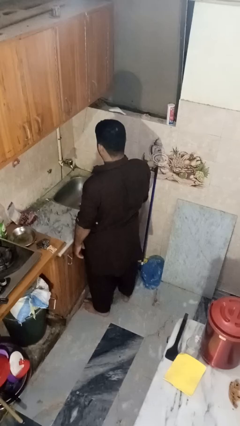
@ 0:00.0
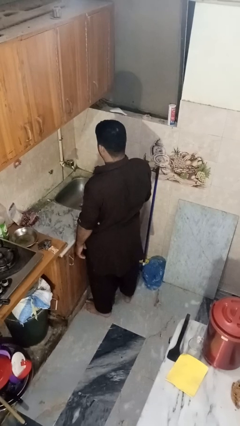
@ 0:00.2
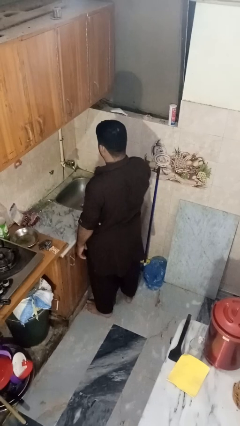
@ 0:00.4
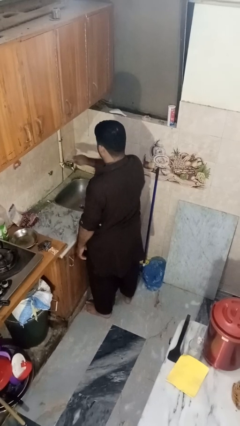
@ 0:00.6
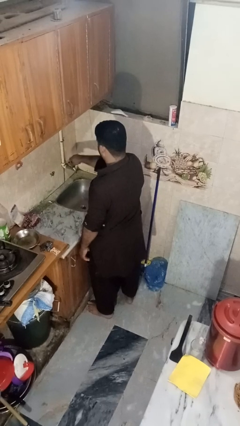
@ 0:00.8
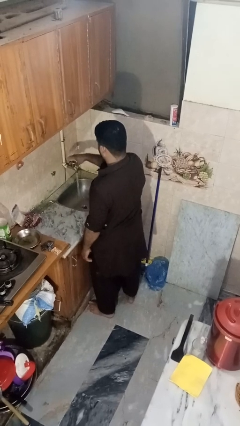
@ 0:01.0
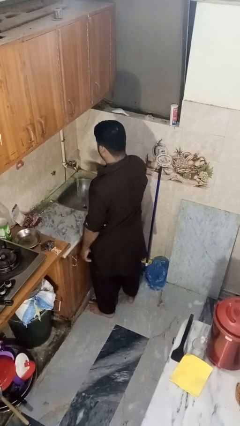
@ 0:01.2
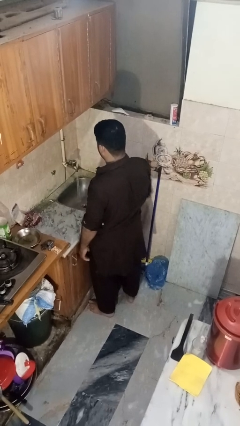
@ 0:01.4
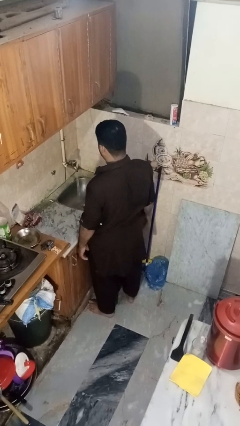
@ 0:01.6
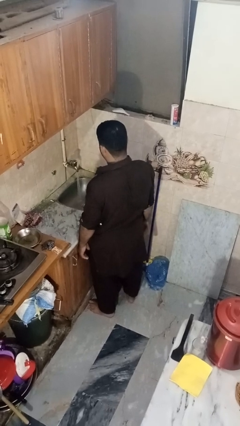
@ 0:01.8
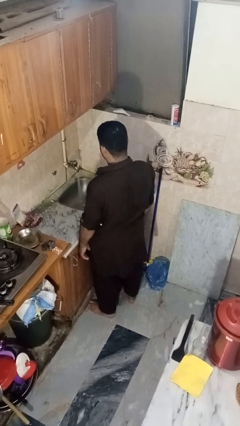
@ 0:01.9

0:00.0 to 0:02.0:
person turns on faucet

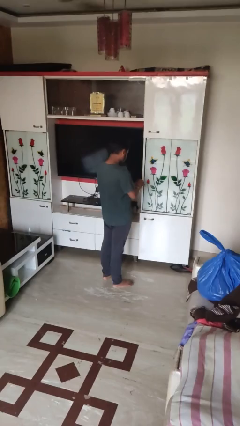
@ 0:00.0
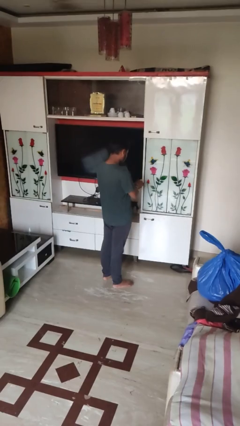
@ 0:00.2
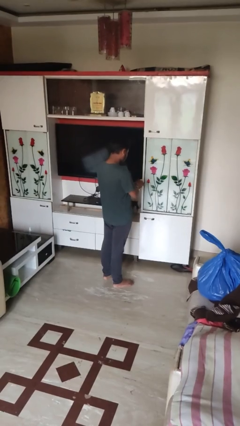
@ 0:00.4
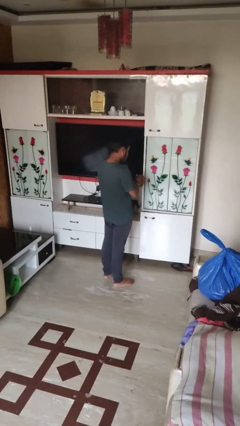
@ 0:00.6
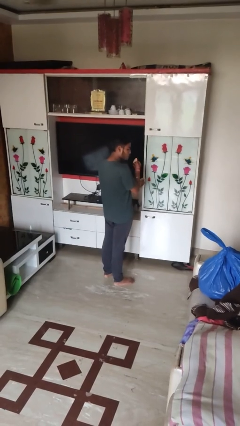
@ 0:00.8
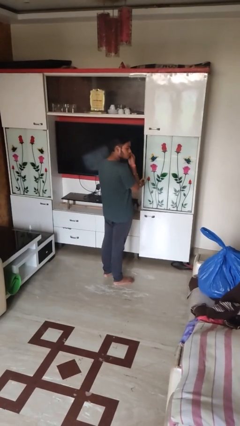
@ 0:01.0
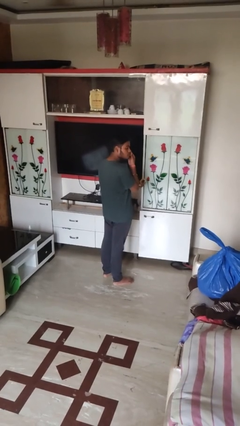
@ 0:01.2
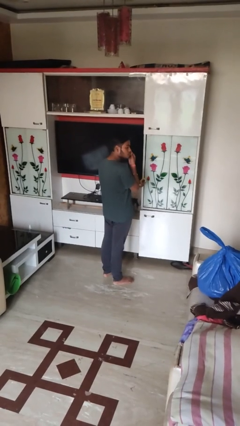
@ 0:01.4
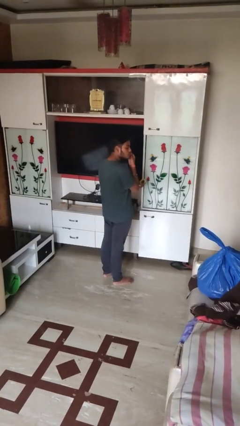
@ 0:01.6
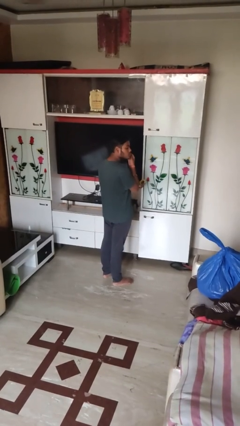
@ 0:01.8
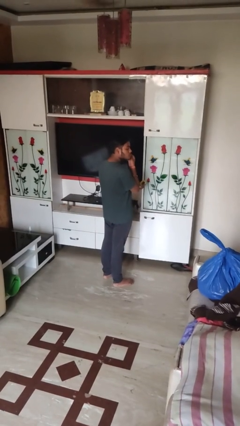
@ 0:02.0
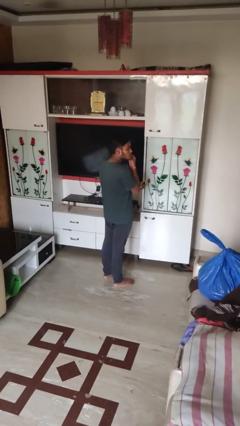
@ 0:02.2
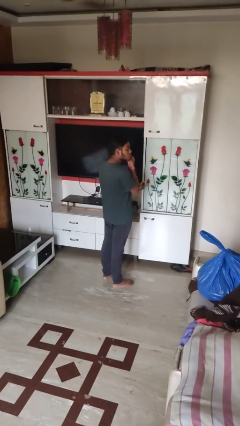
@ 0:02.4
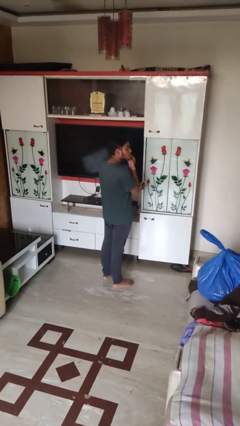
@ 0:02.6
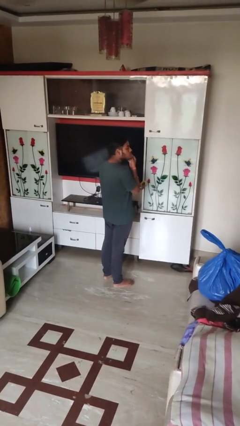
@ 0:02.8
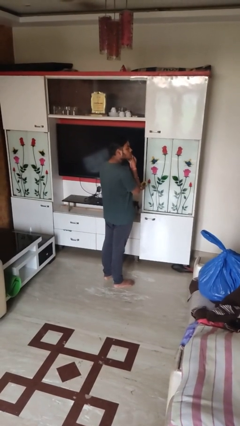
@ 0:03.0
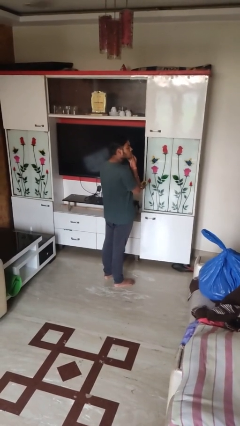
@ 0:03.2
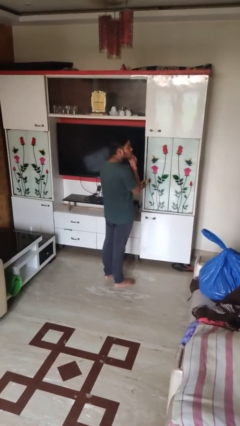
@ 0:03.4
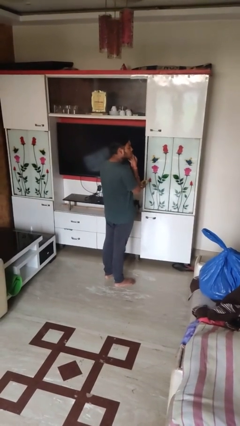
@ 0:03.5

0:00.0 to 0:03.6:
person applies foundation makeup

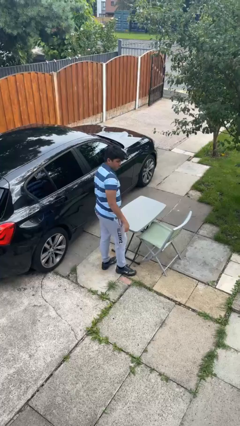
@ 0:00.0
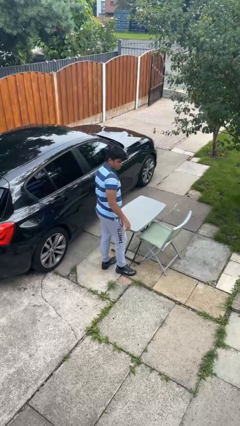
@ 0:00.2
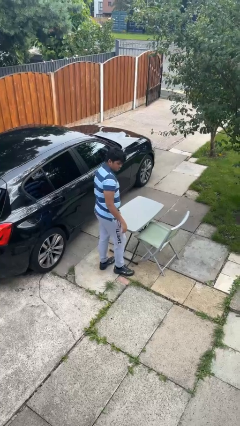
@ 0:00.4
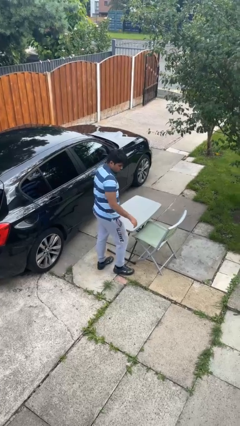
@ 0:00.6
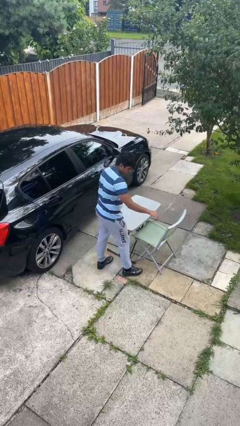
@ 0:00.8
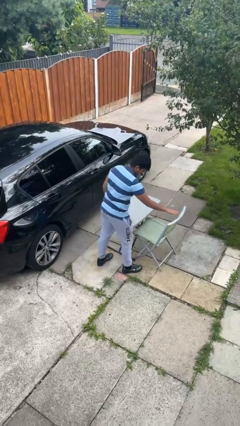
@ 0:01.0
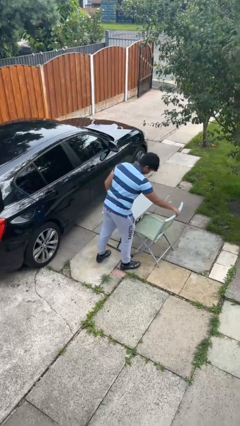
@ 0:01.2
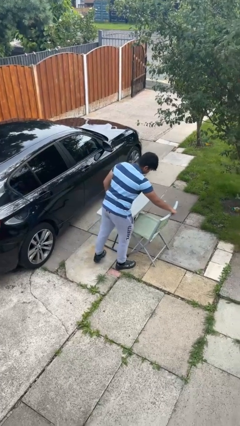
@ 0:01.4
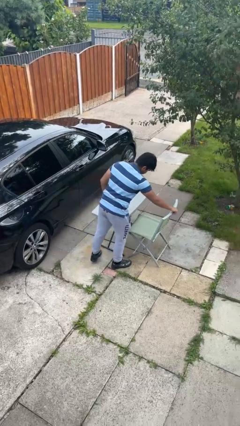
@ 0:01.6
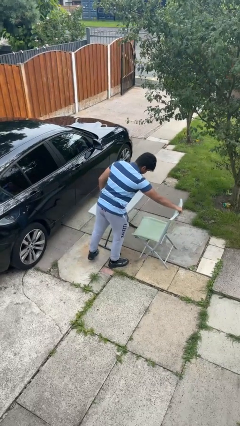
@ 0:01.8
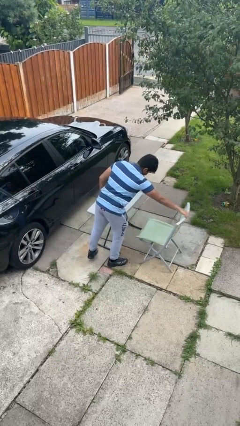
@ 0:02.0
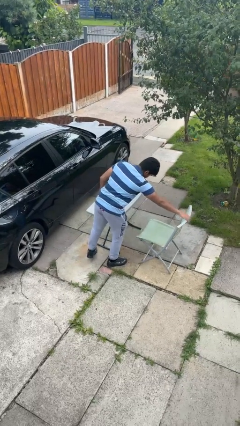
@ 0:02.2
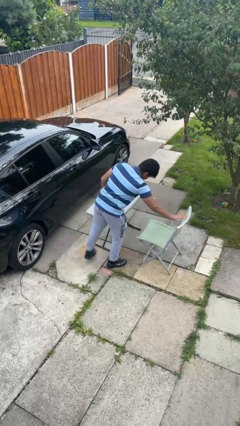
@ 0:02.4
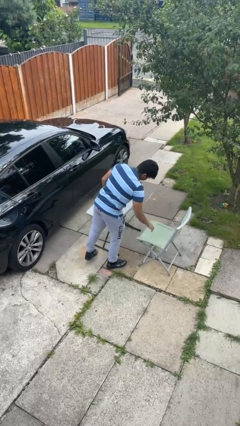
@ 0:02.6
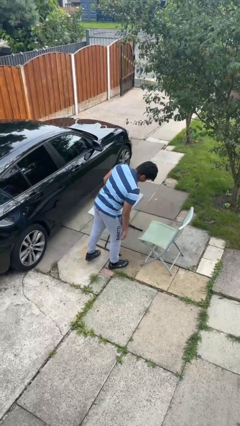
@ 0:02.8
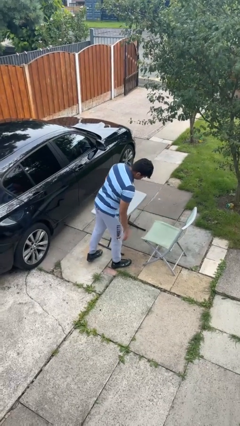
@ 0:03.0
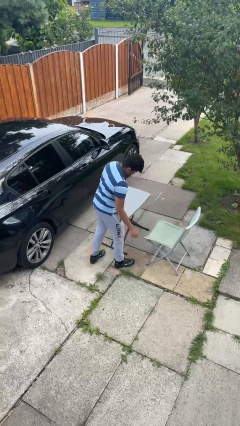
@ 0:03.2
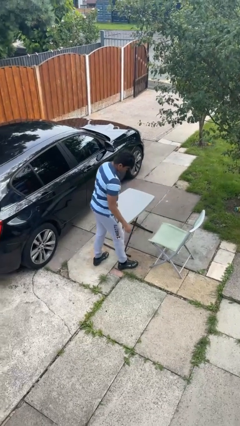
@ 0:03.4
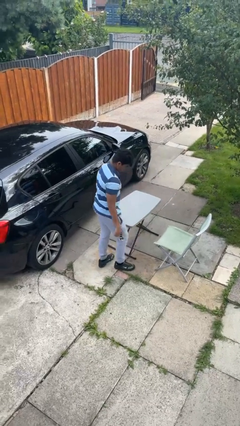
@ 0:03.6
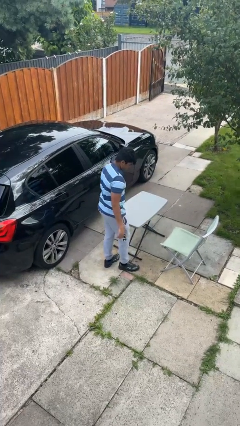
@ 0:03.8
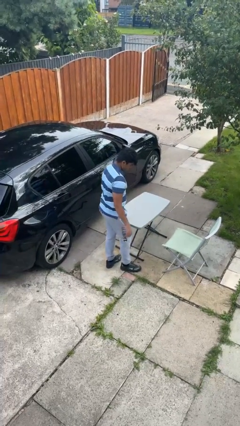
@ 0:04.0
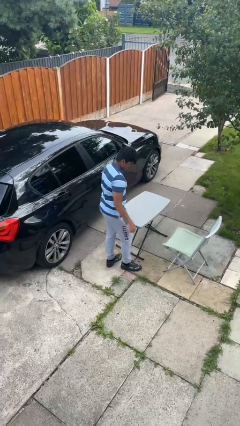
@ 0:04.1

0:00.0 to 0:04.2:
person pulls out chair

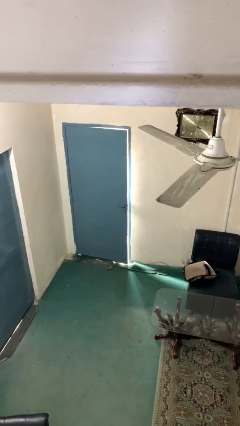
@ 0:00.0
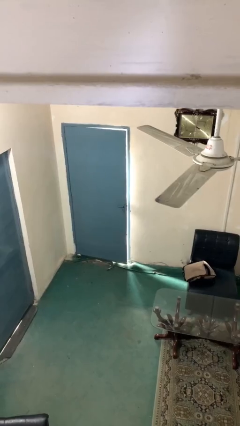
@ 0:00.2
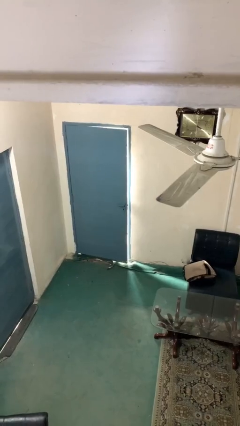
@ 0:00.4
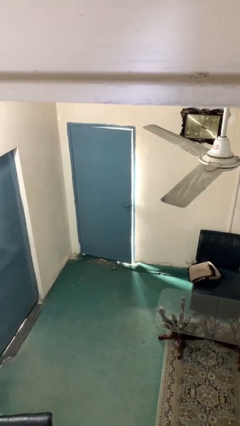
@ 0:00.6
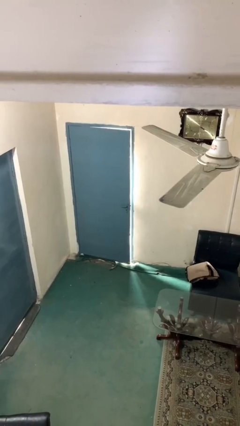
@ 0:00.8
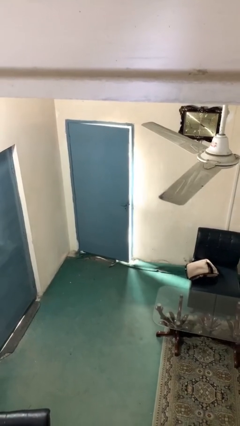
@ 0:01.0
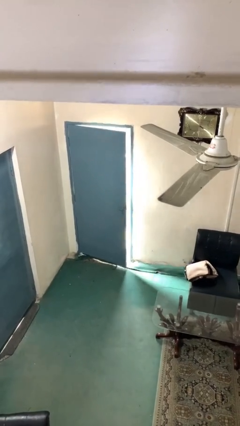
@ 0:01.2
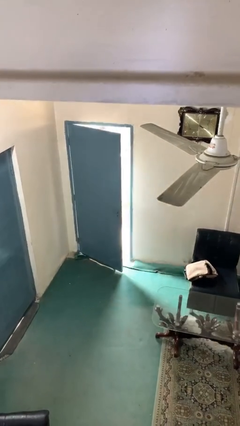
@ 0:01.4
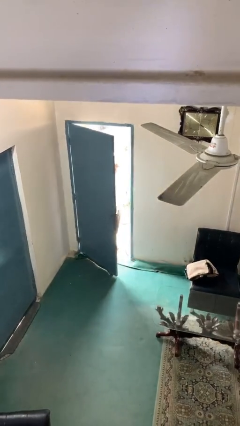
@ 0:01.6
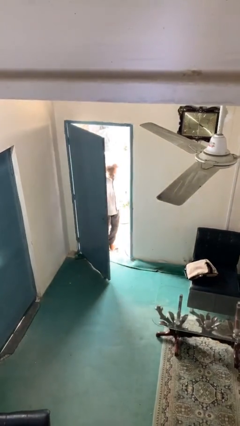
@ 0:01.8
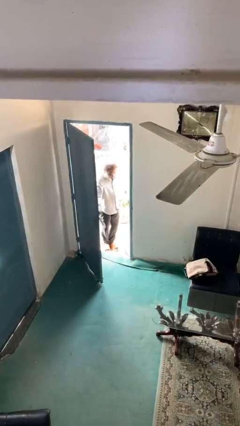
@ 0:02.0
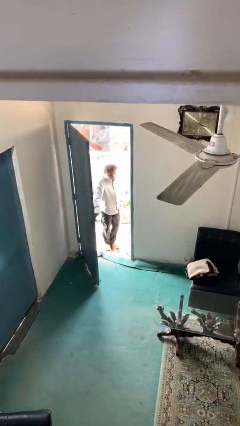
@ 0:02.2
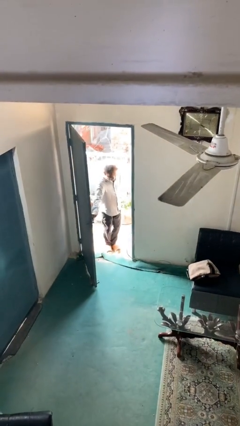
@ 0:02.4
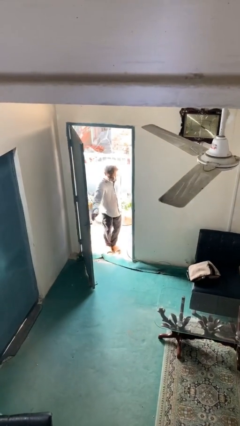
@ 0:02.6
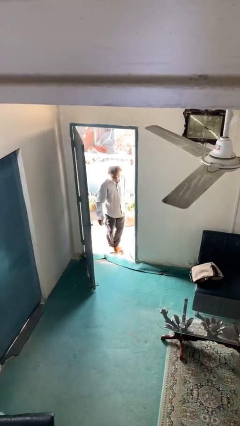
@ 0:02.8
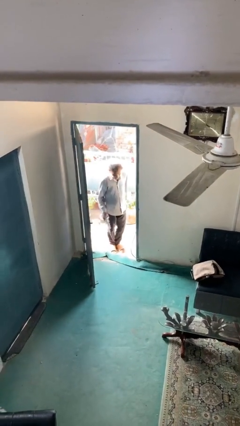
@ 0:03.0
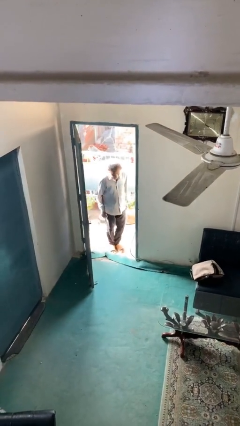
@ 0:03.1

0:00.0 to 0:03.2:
person opens facility door

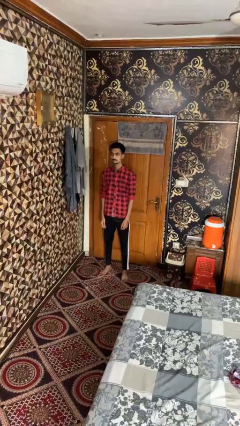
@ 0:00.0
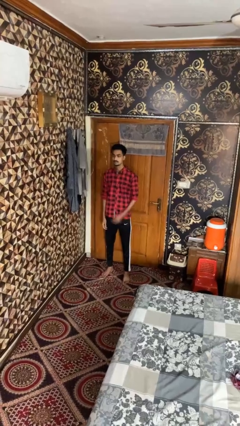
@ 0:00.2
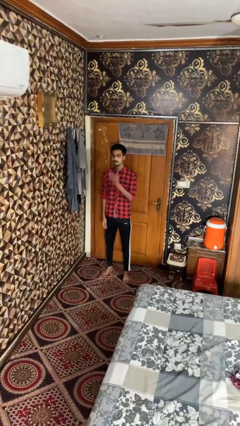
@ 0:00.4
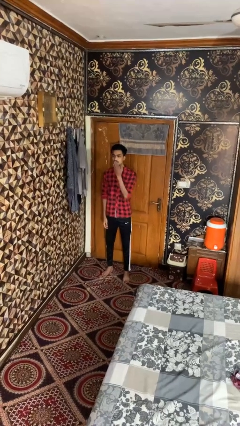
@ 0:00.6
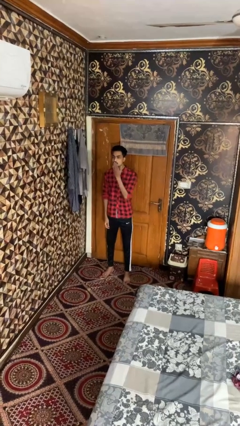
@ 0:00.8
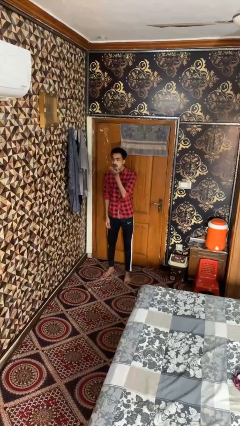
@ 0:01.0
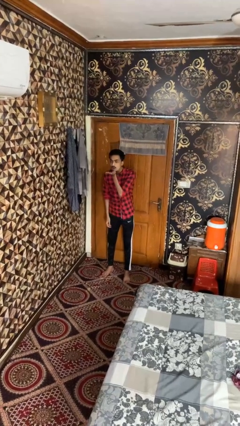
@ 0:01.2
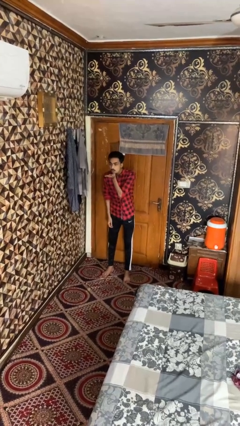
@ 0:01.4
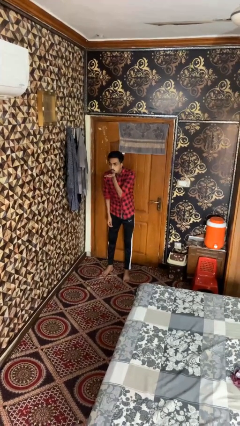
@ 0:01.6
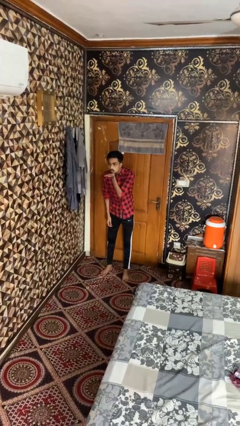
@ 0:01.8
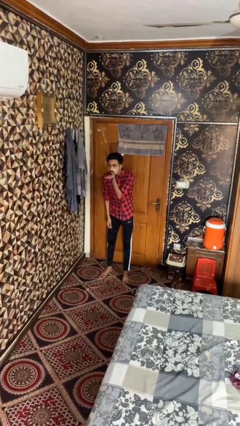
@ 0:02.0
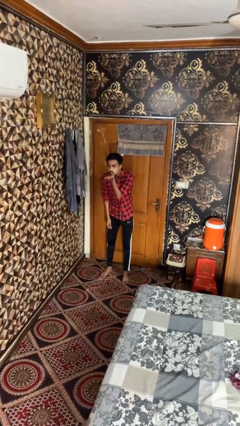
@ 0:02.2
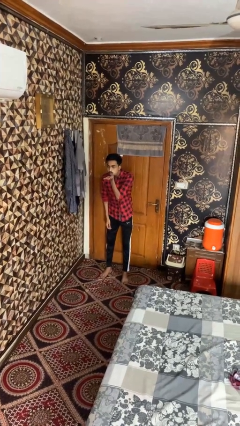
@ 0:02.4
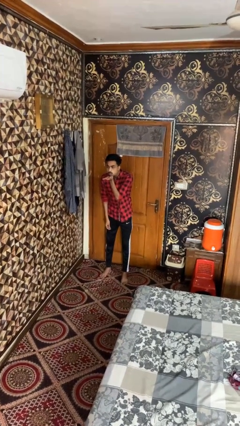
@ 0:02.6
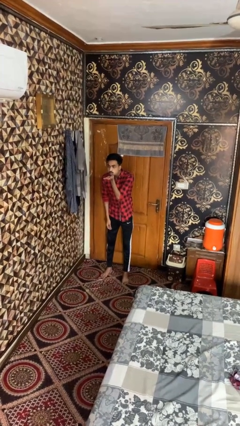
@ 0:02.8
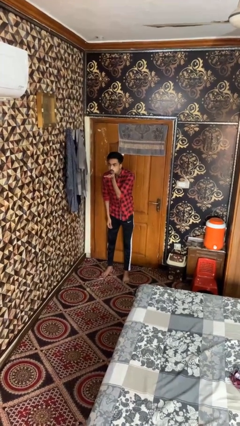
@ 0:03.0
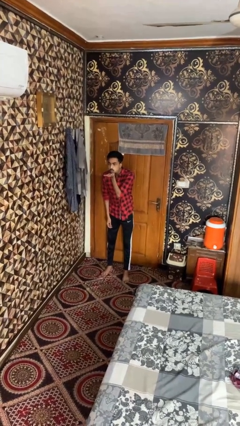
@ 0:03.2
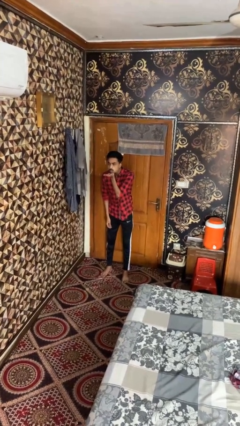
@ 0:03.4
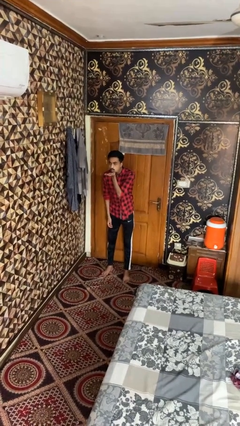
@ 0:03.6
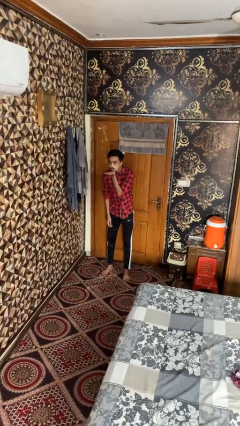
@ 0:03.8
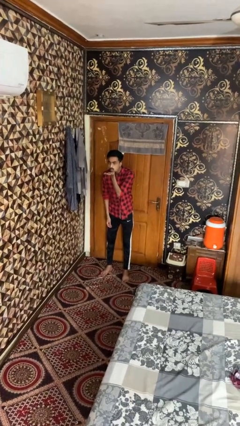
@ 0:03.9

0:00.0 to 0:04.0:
person gestures blow kiss

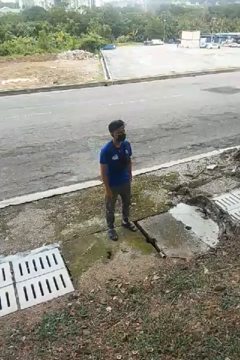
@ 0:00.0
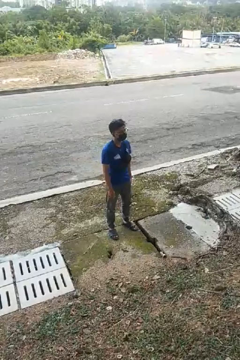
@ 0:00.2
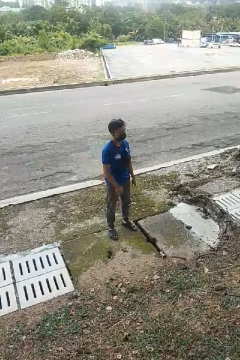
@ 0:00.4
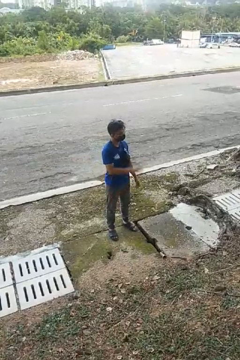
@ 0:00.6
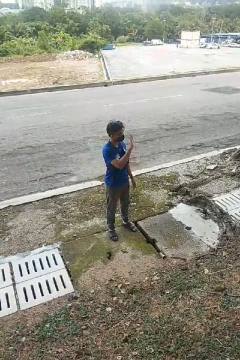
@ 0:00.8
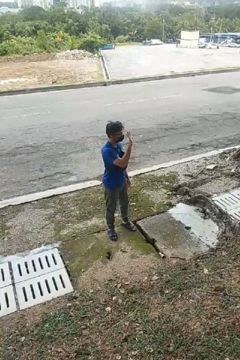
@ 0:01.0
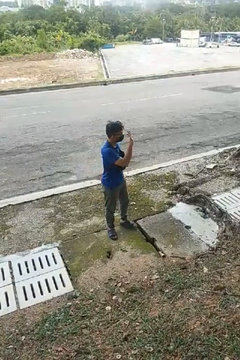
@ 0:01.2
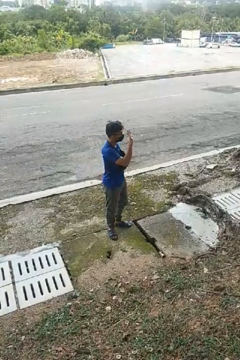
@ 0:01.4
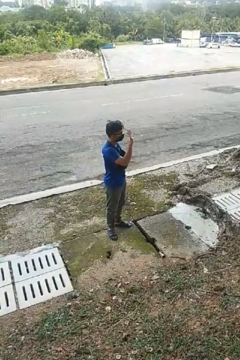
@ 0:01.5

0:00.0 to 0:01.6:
person gestures number five
